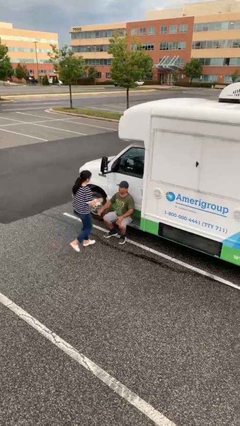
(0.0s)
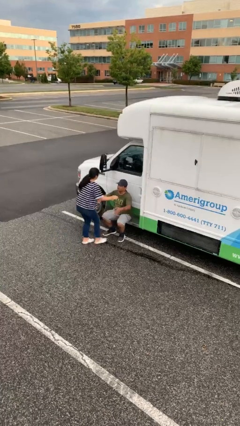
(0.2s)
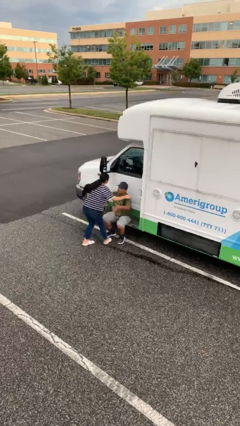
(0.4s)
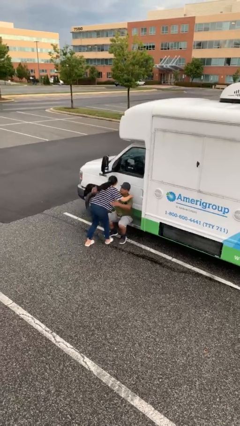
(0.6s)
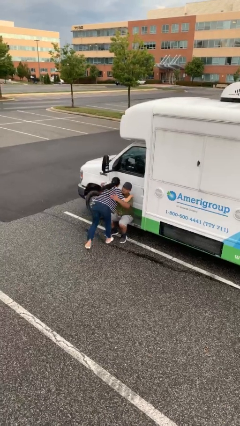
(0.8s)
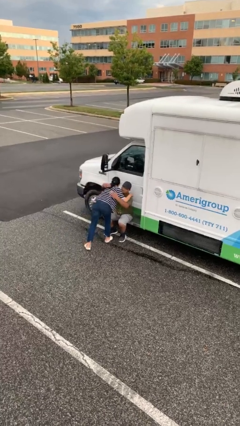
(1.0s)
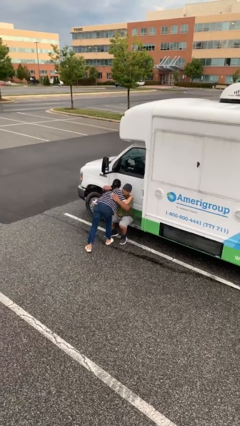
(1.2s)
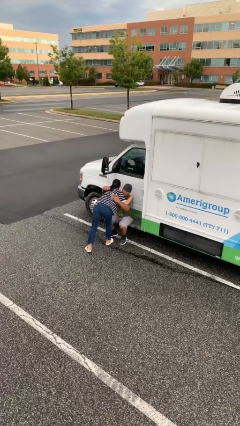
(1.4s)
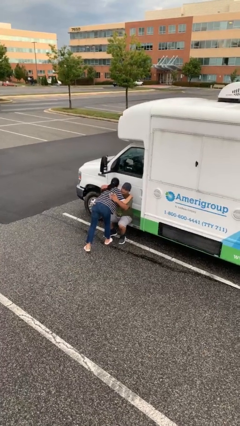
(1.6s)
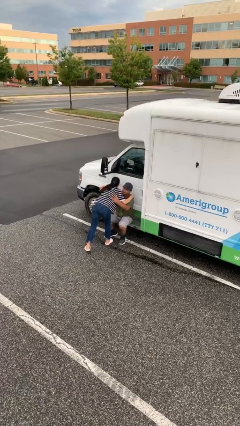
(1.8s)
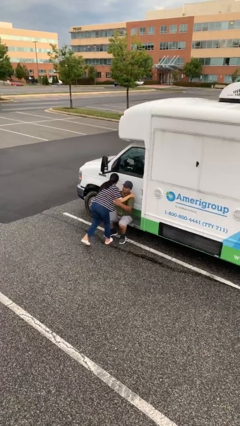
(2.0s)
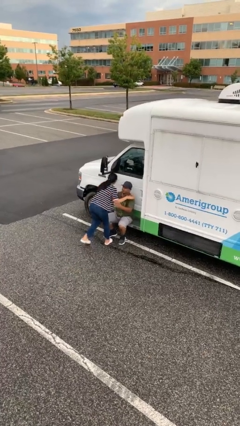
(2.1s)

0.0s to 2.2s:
person embraces person

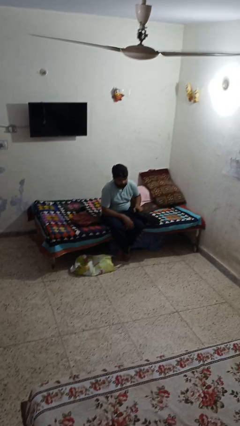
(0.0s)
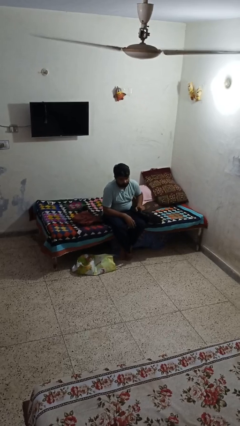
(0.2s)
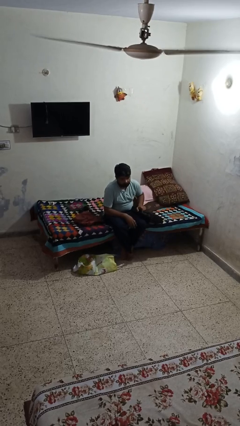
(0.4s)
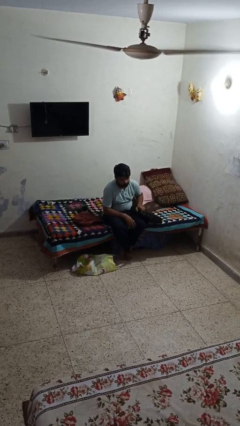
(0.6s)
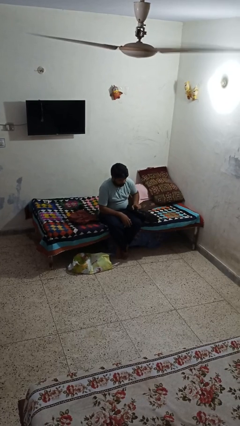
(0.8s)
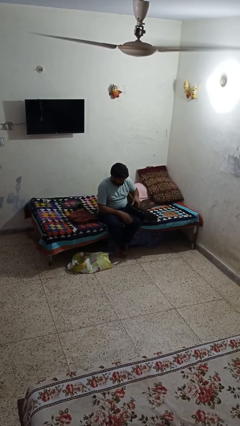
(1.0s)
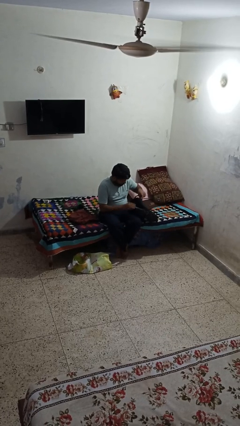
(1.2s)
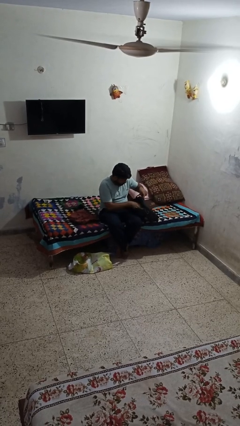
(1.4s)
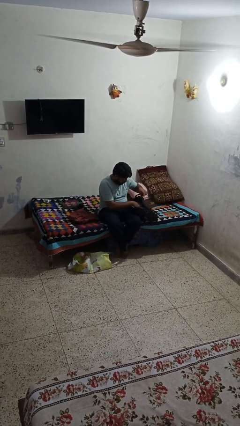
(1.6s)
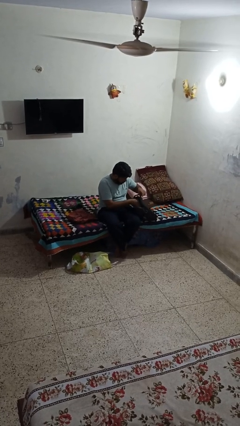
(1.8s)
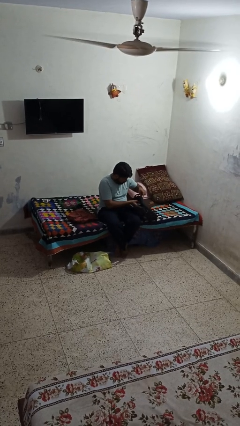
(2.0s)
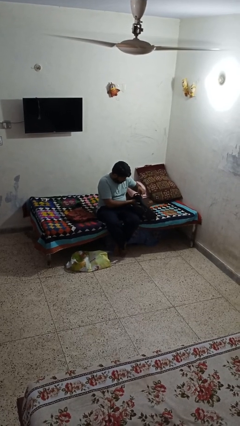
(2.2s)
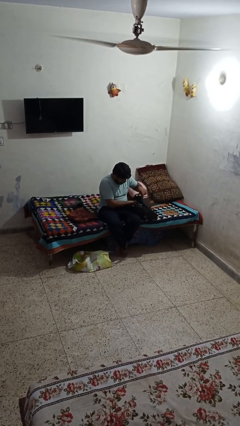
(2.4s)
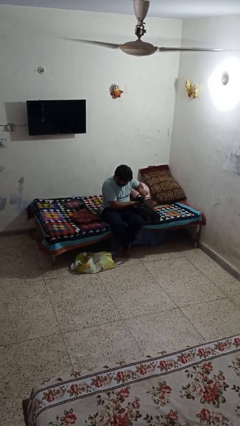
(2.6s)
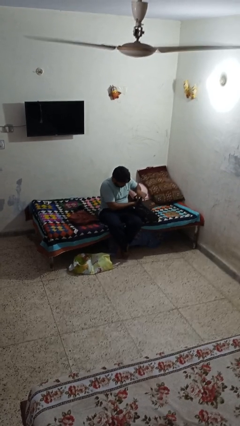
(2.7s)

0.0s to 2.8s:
person searches in backpack

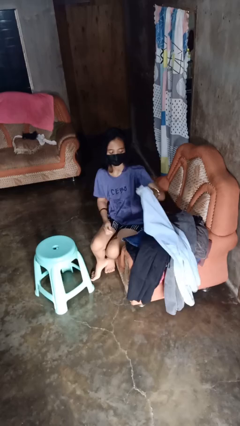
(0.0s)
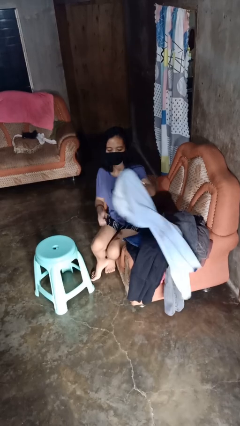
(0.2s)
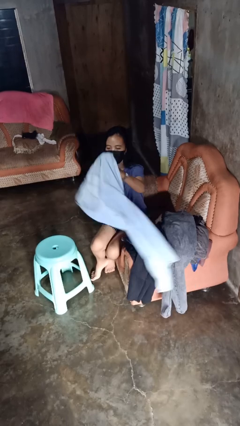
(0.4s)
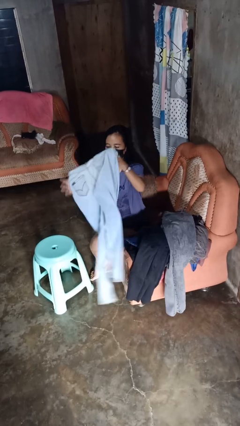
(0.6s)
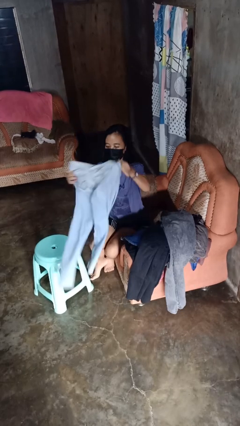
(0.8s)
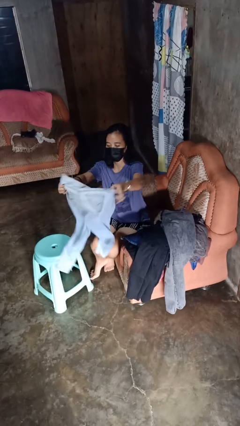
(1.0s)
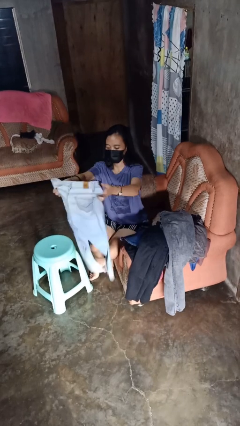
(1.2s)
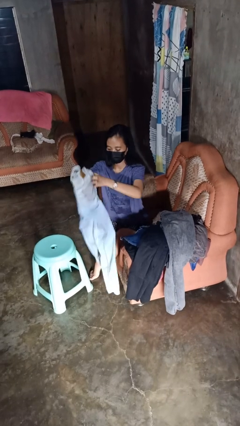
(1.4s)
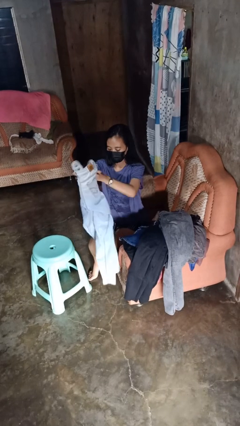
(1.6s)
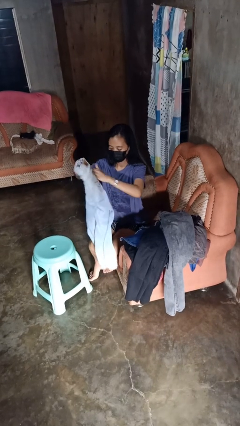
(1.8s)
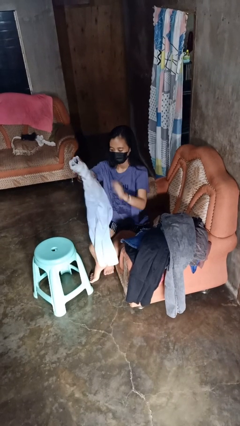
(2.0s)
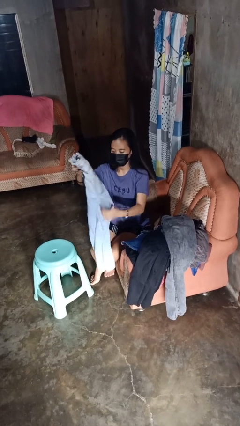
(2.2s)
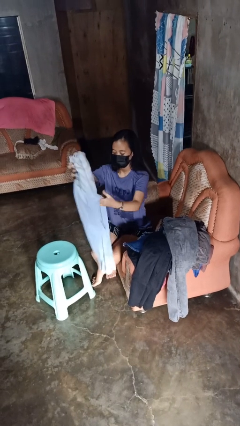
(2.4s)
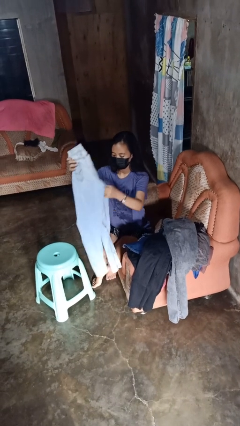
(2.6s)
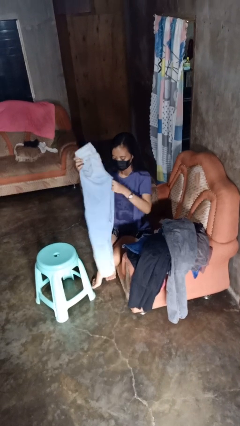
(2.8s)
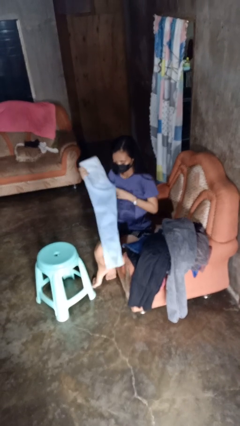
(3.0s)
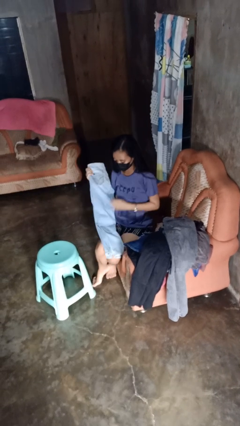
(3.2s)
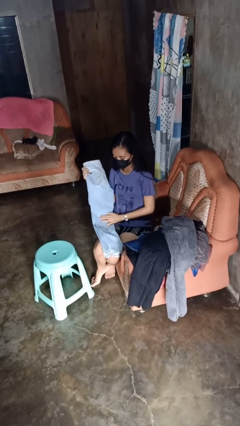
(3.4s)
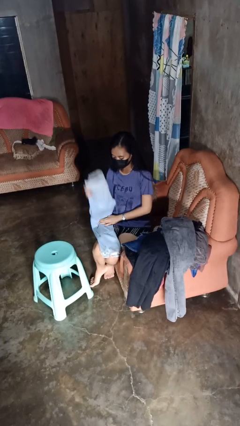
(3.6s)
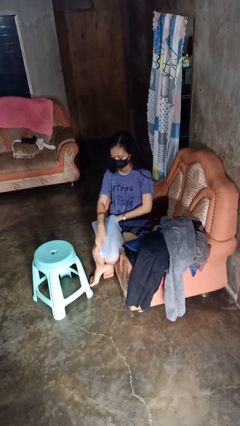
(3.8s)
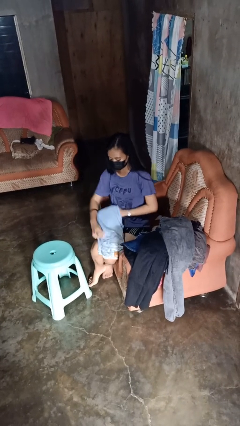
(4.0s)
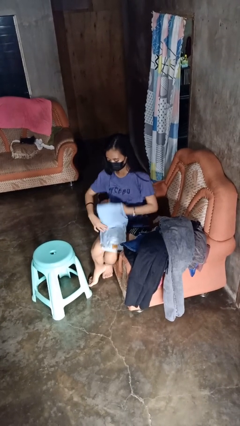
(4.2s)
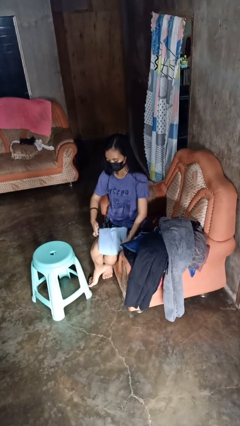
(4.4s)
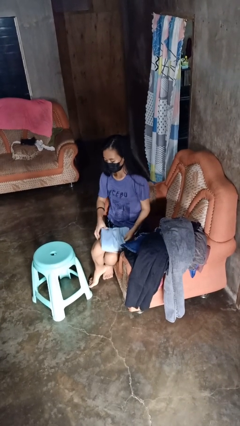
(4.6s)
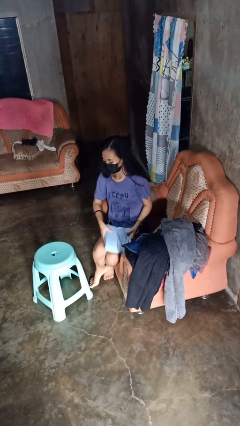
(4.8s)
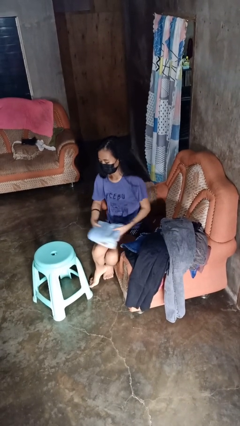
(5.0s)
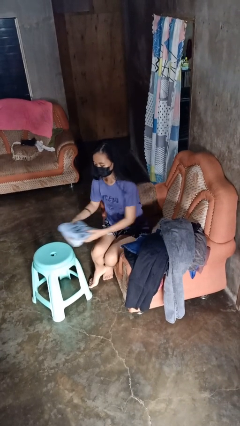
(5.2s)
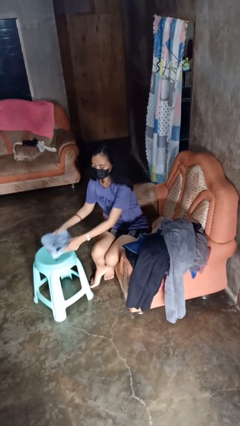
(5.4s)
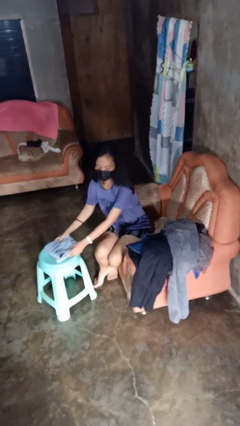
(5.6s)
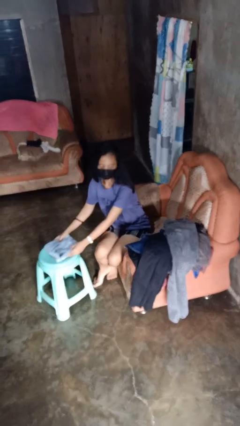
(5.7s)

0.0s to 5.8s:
person folds pants

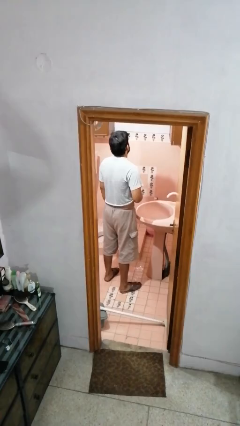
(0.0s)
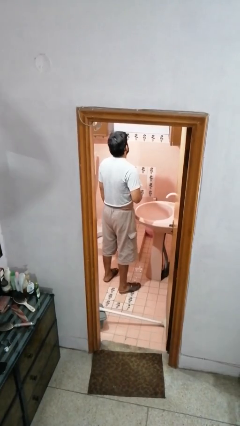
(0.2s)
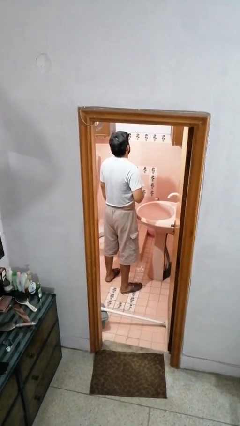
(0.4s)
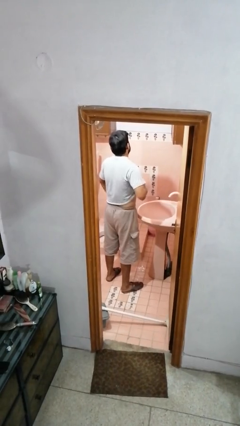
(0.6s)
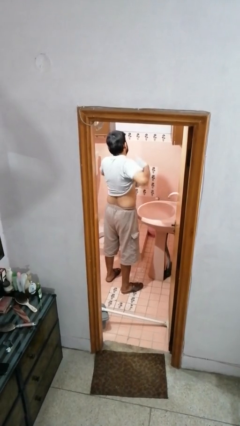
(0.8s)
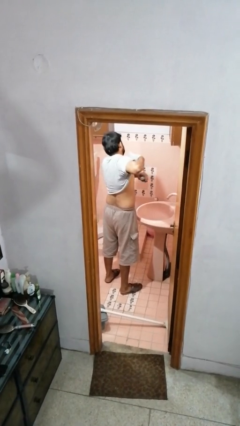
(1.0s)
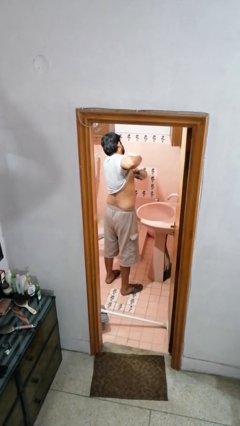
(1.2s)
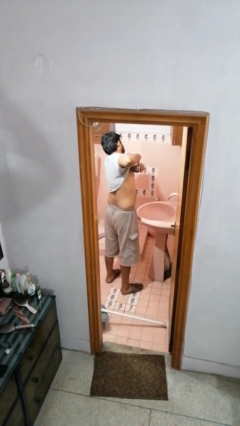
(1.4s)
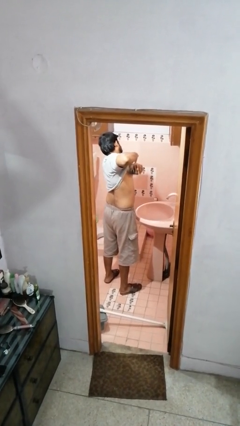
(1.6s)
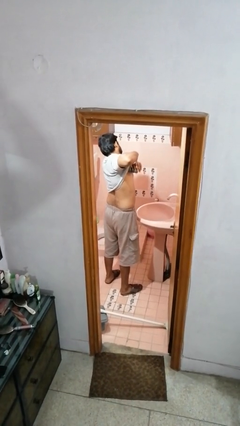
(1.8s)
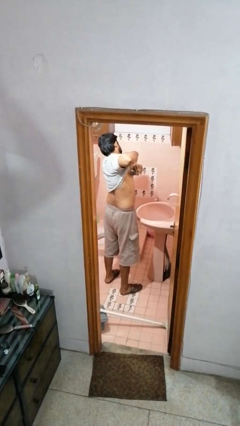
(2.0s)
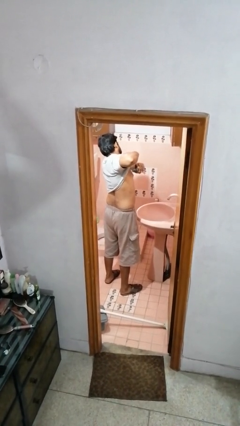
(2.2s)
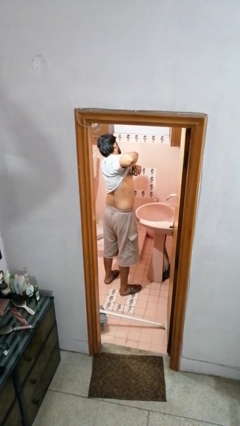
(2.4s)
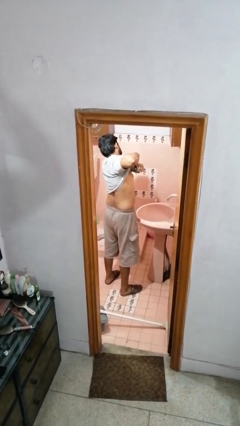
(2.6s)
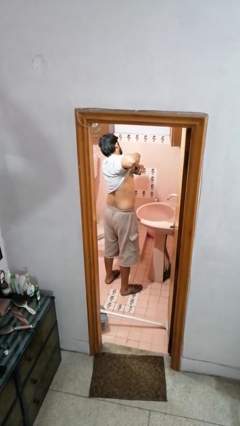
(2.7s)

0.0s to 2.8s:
person applies deodorant

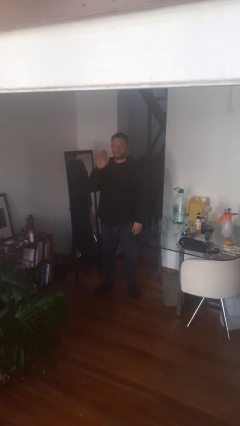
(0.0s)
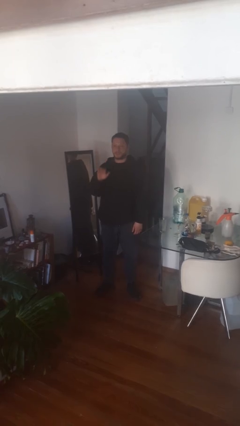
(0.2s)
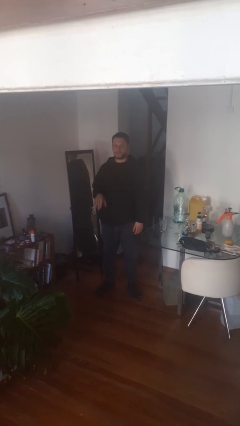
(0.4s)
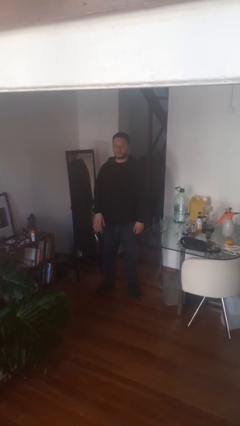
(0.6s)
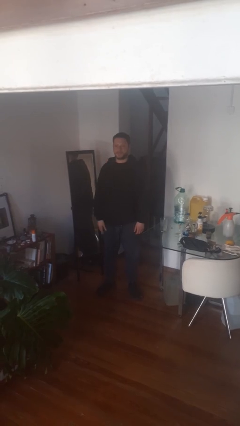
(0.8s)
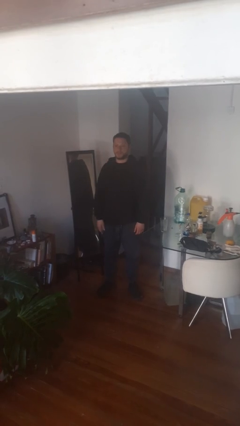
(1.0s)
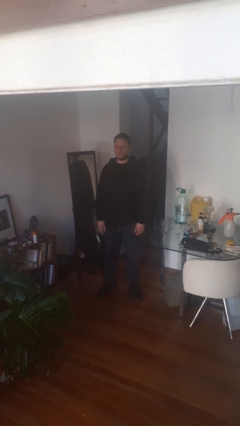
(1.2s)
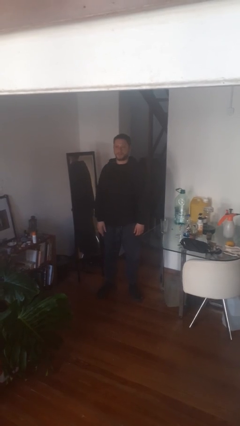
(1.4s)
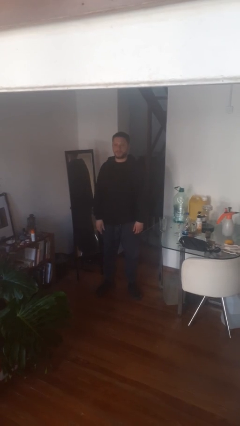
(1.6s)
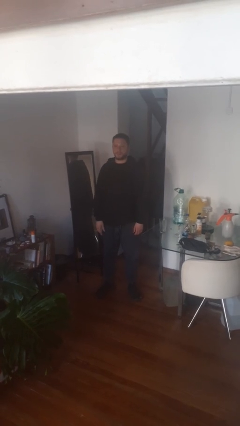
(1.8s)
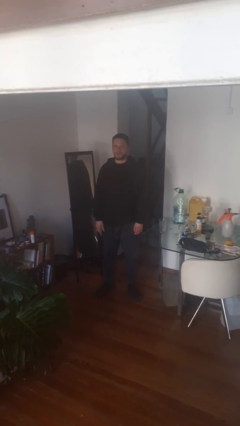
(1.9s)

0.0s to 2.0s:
person gestures lower hand

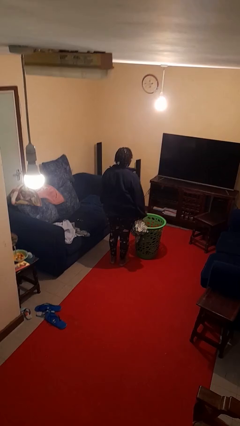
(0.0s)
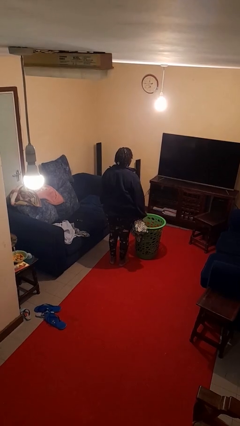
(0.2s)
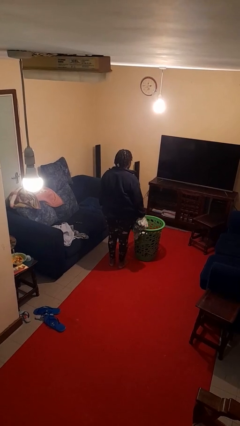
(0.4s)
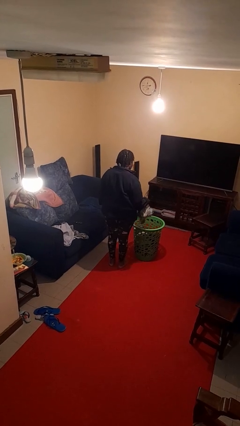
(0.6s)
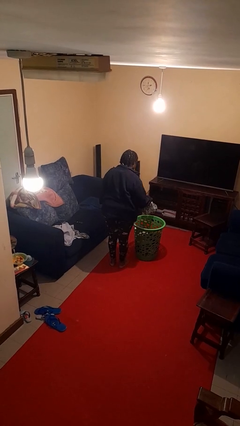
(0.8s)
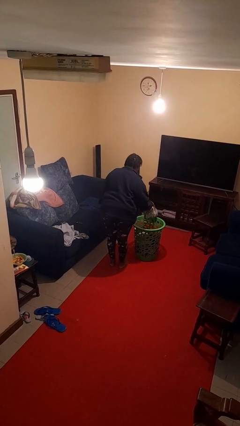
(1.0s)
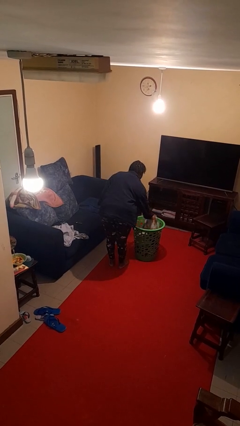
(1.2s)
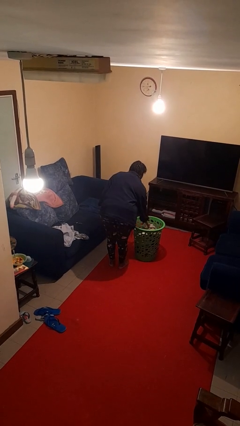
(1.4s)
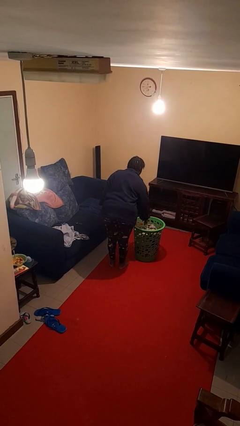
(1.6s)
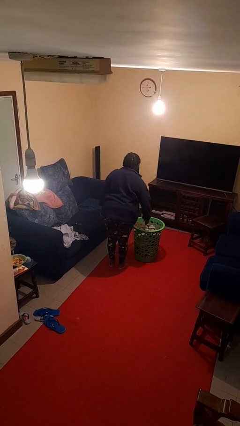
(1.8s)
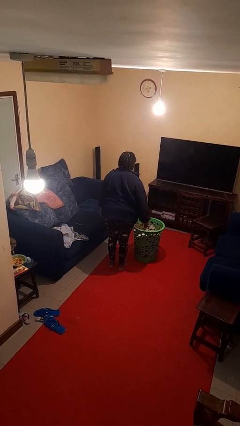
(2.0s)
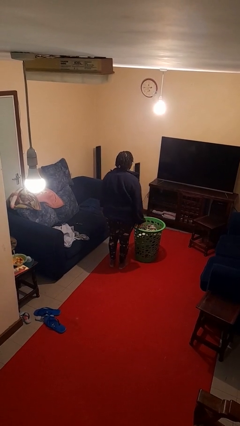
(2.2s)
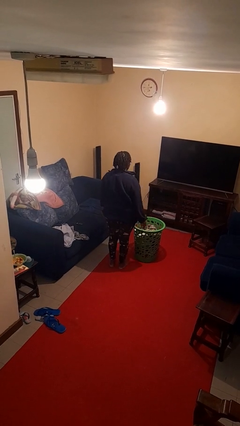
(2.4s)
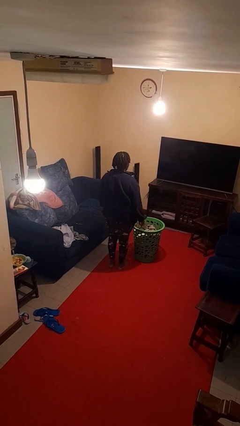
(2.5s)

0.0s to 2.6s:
person puts object into basket
